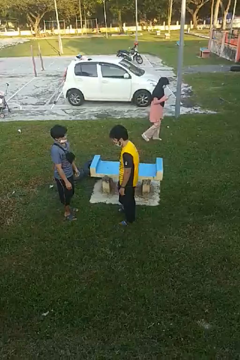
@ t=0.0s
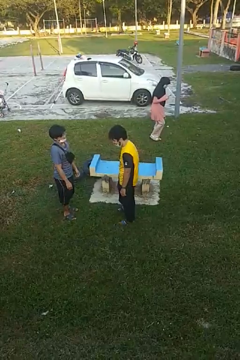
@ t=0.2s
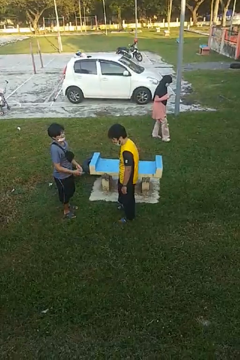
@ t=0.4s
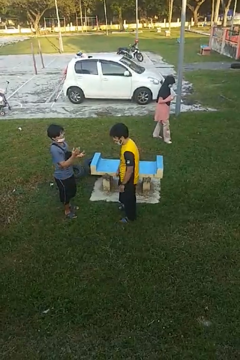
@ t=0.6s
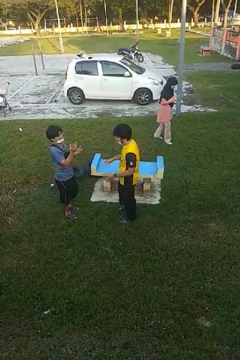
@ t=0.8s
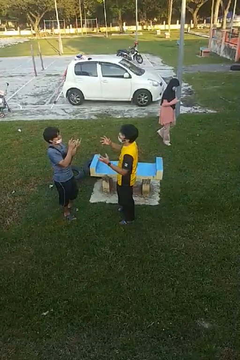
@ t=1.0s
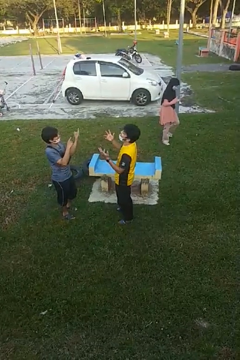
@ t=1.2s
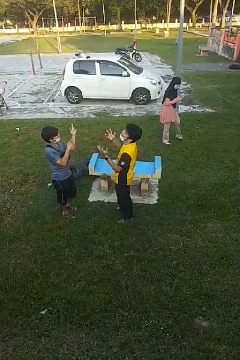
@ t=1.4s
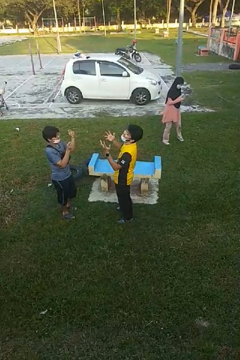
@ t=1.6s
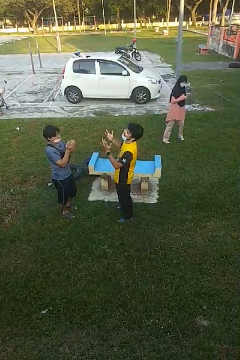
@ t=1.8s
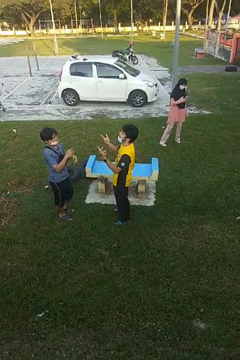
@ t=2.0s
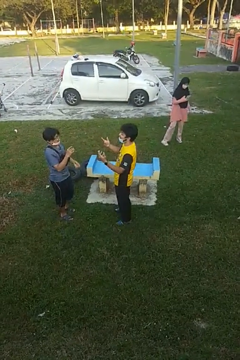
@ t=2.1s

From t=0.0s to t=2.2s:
person talks to person

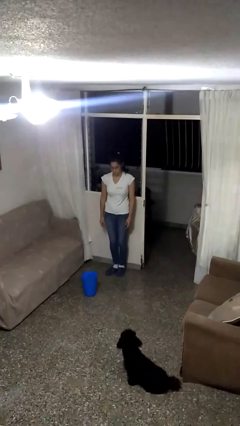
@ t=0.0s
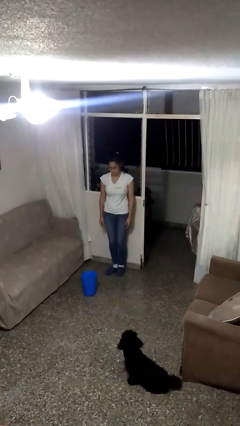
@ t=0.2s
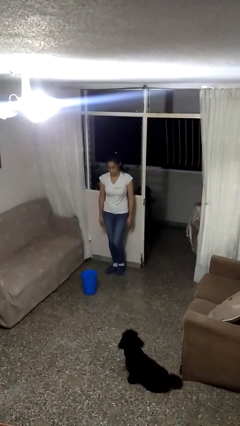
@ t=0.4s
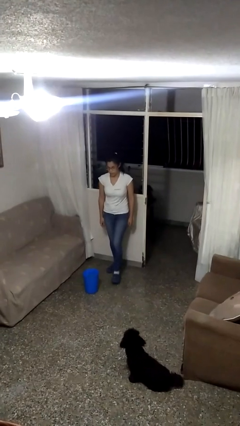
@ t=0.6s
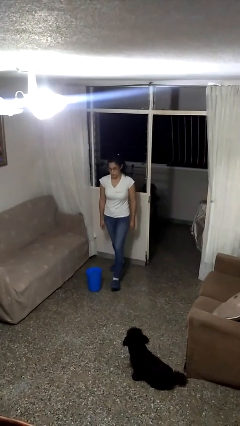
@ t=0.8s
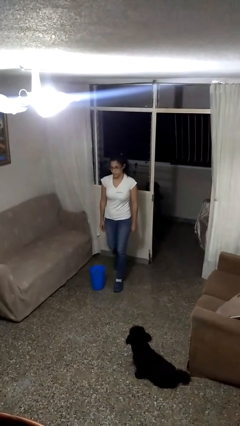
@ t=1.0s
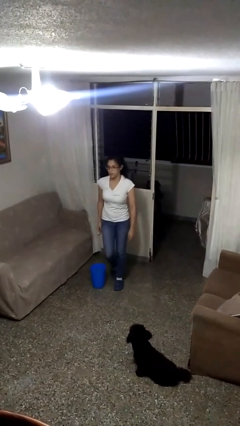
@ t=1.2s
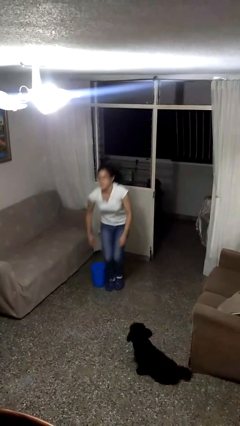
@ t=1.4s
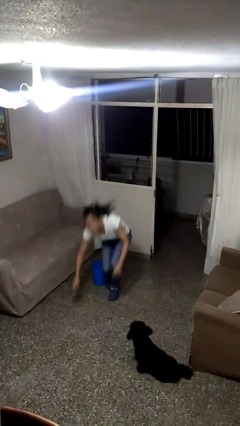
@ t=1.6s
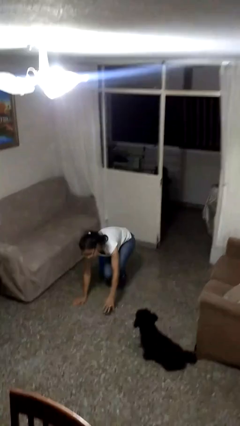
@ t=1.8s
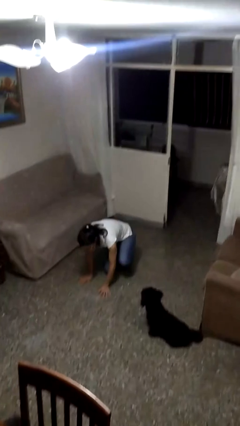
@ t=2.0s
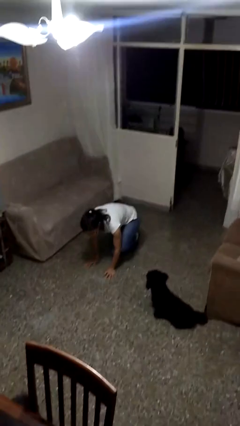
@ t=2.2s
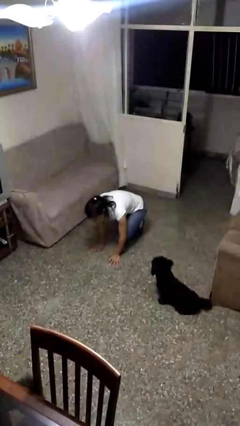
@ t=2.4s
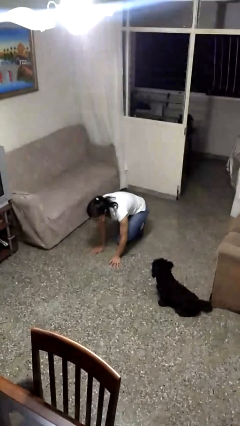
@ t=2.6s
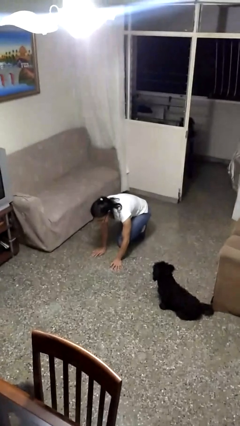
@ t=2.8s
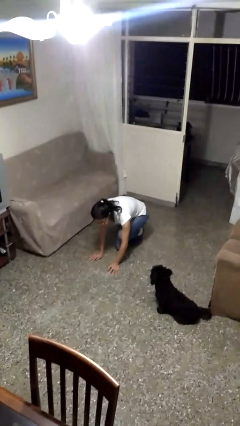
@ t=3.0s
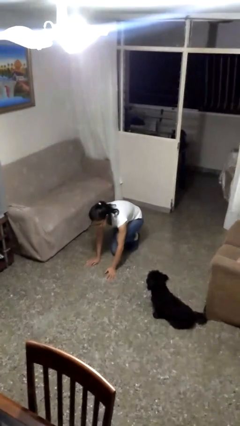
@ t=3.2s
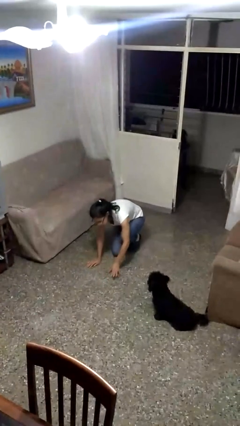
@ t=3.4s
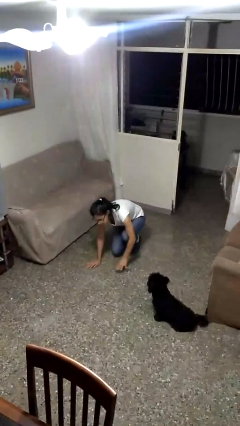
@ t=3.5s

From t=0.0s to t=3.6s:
person trips on object on floor

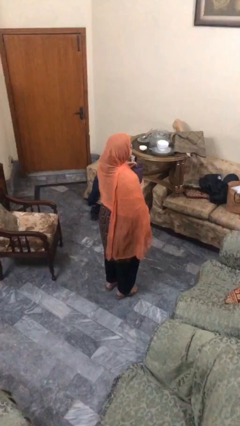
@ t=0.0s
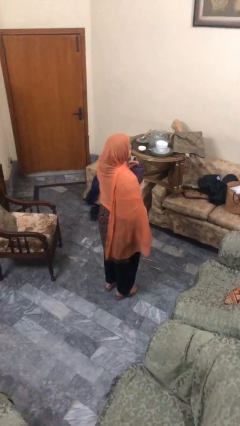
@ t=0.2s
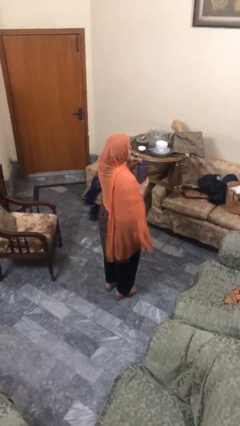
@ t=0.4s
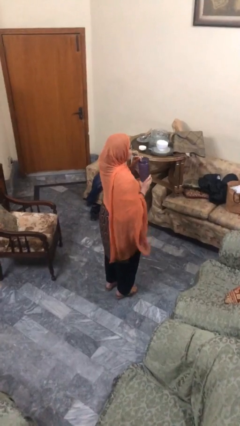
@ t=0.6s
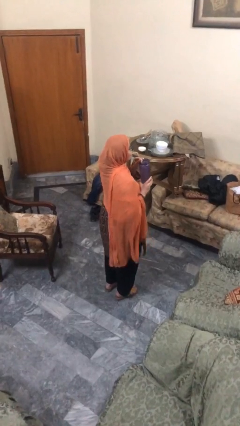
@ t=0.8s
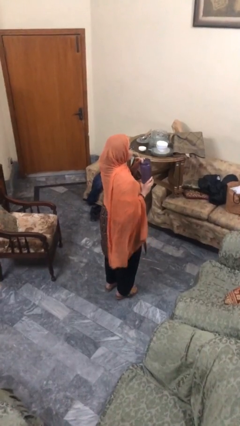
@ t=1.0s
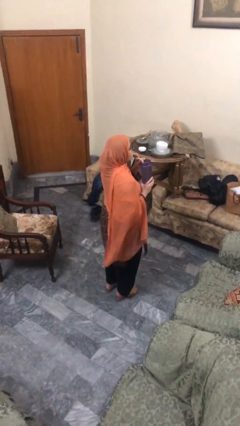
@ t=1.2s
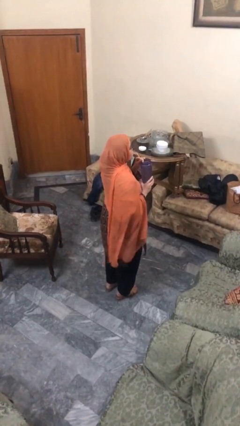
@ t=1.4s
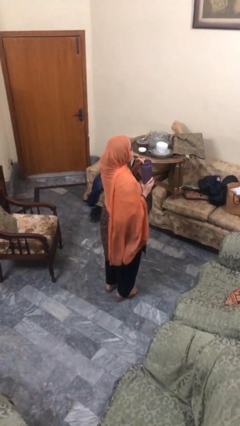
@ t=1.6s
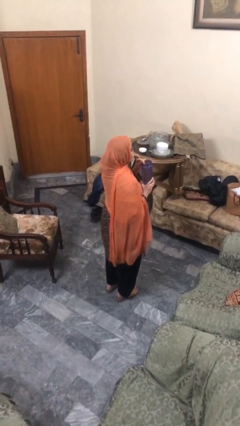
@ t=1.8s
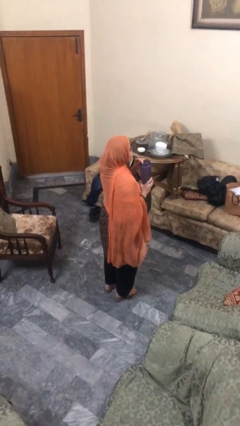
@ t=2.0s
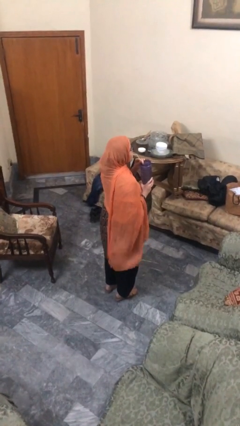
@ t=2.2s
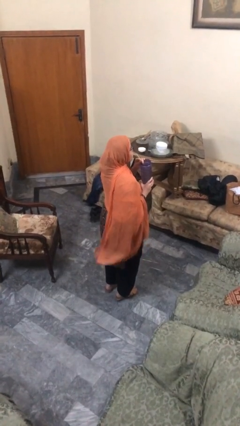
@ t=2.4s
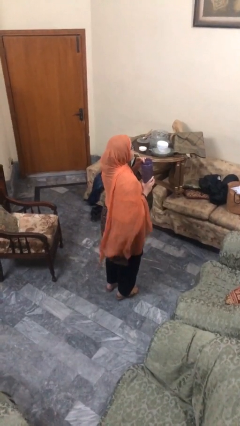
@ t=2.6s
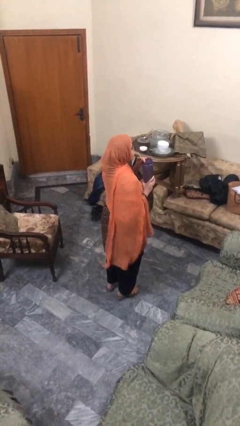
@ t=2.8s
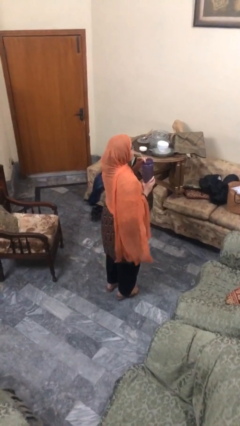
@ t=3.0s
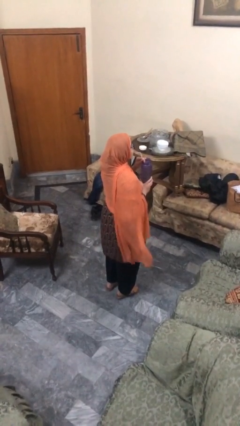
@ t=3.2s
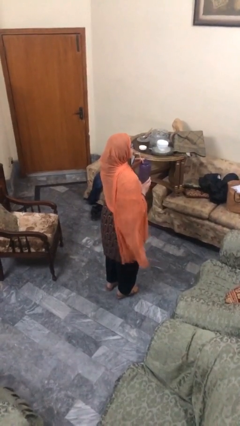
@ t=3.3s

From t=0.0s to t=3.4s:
person drinks from straw

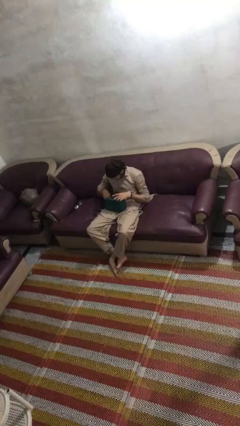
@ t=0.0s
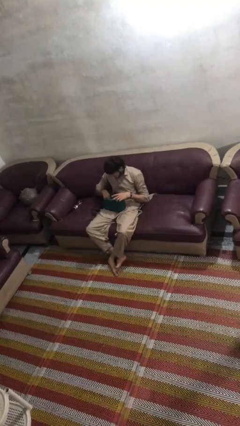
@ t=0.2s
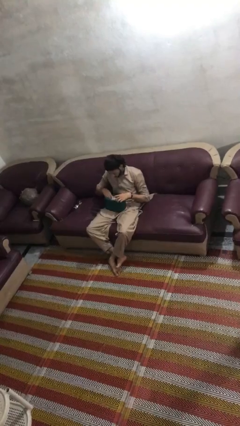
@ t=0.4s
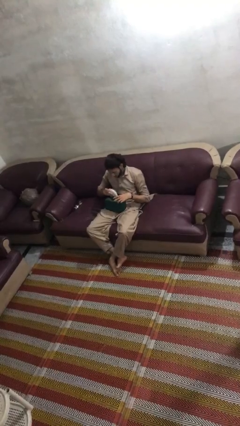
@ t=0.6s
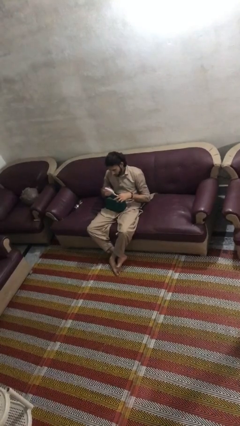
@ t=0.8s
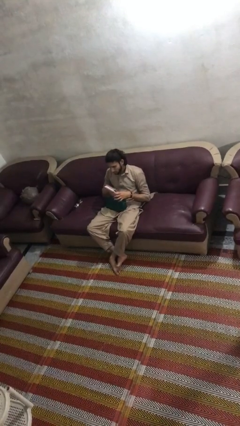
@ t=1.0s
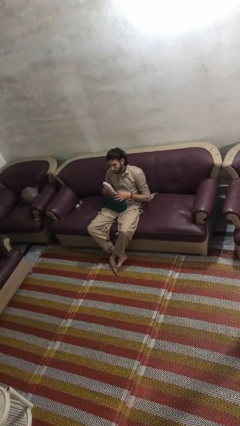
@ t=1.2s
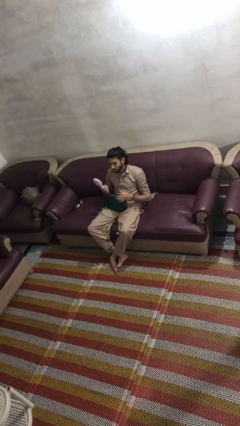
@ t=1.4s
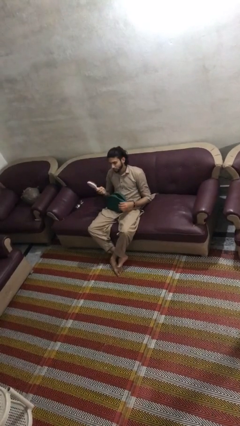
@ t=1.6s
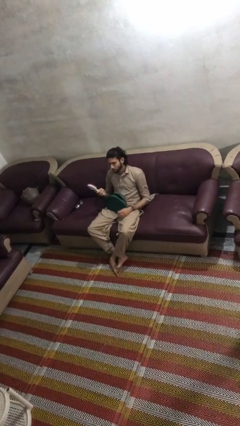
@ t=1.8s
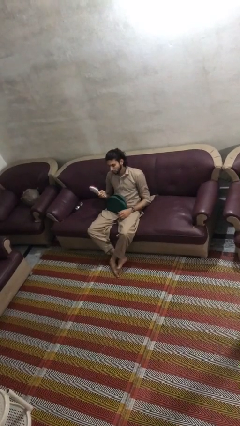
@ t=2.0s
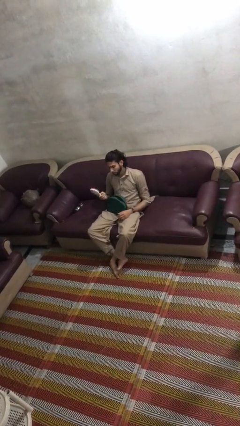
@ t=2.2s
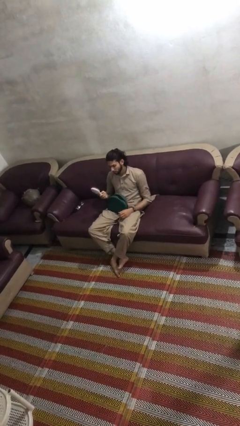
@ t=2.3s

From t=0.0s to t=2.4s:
person takes object from purse

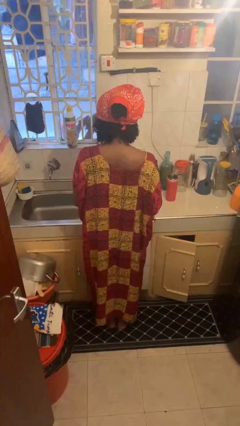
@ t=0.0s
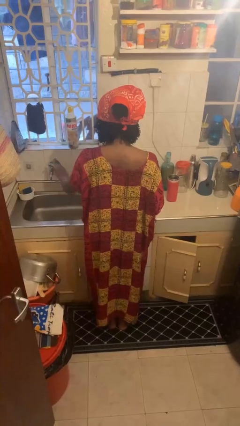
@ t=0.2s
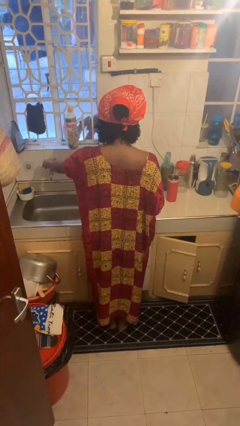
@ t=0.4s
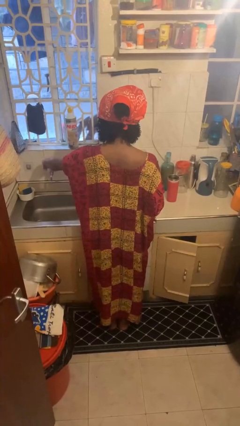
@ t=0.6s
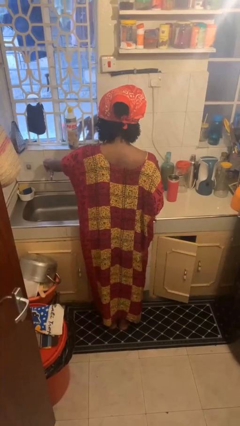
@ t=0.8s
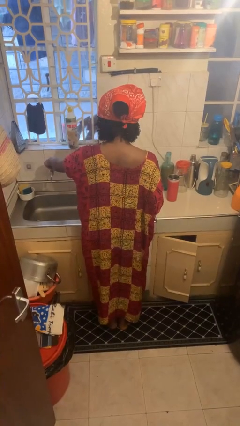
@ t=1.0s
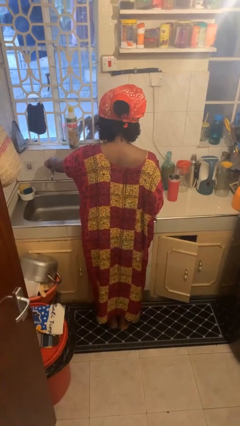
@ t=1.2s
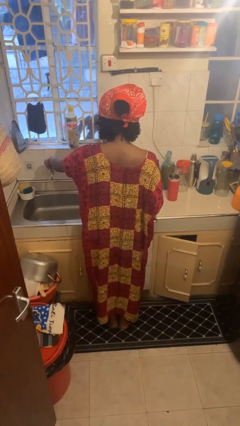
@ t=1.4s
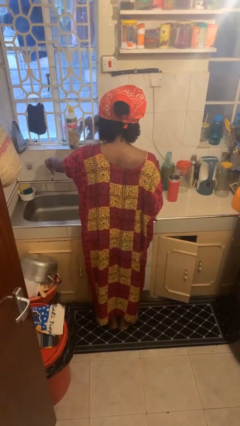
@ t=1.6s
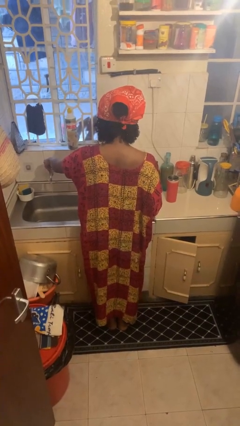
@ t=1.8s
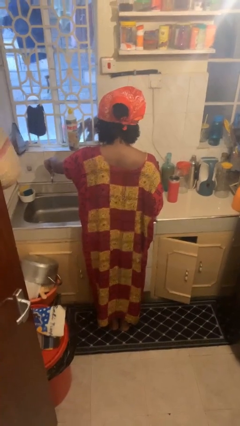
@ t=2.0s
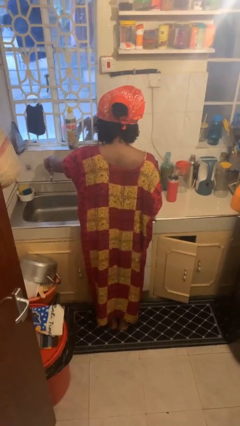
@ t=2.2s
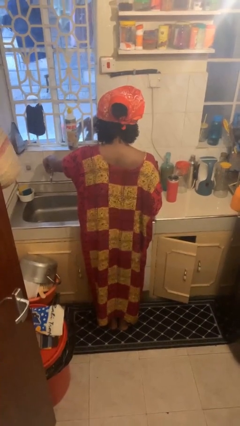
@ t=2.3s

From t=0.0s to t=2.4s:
person turns on faucet

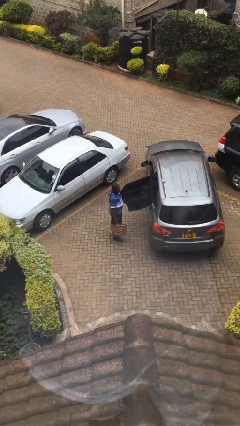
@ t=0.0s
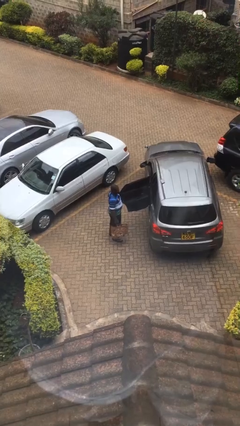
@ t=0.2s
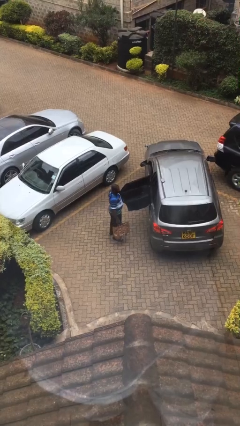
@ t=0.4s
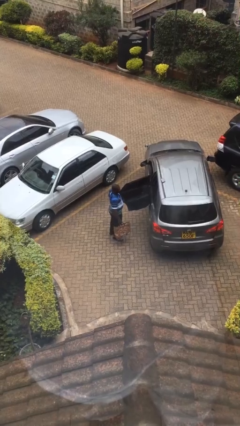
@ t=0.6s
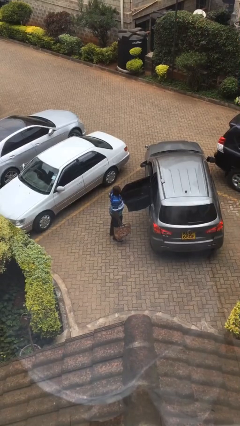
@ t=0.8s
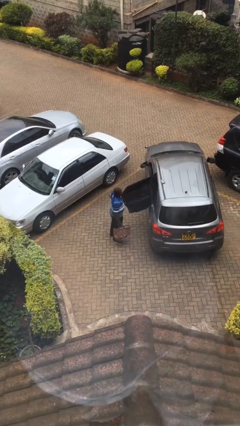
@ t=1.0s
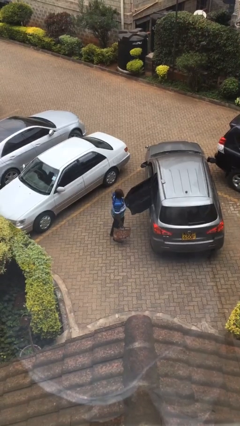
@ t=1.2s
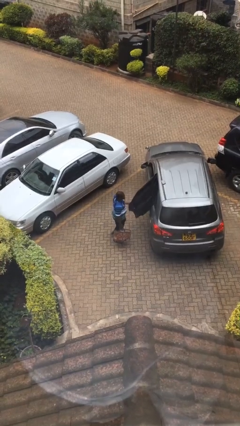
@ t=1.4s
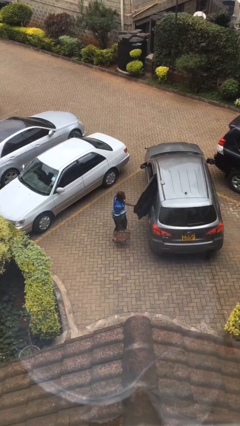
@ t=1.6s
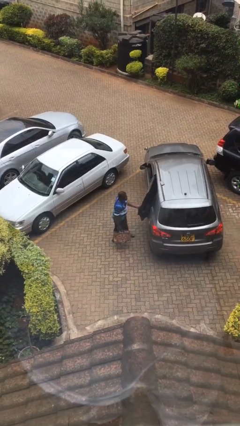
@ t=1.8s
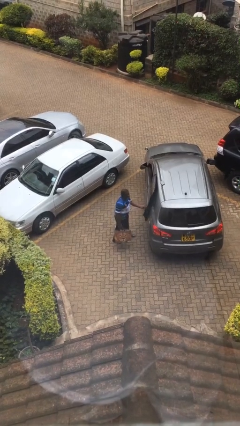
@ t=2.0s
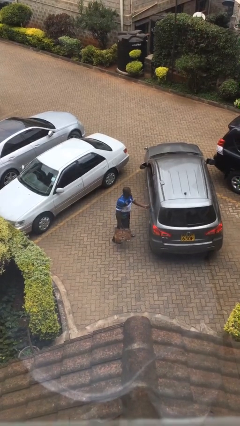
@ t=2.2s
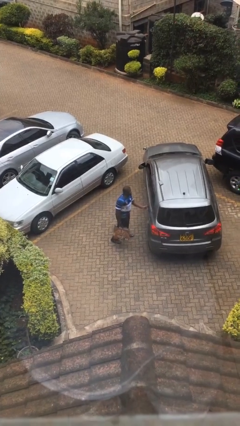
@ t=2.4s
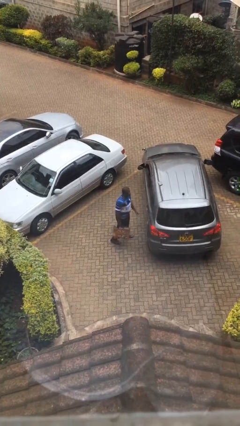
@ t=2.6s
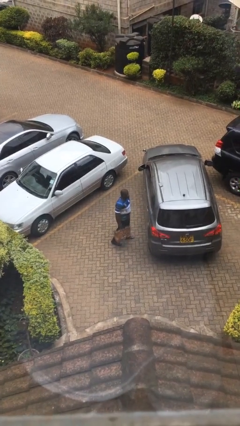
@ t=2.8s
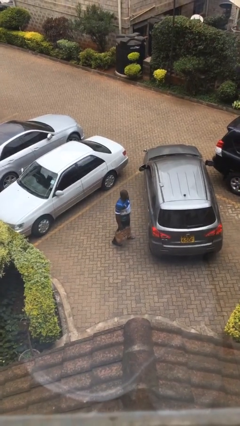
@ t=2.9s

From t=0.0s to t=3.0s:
person closes car door

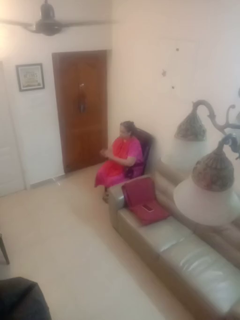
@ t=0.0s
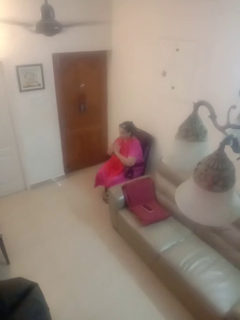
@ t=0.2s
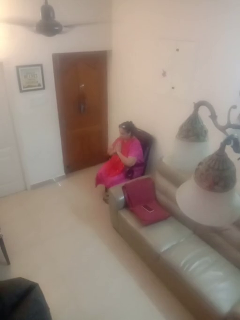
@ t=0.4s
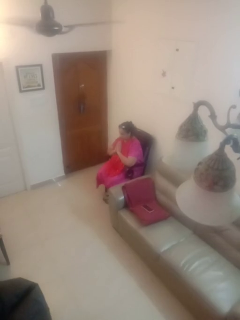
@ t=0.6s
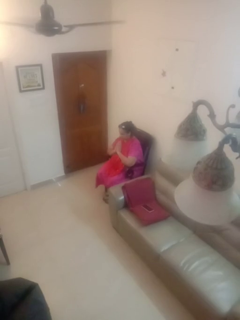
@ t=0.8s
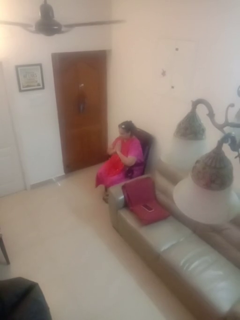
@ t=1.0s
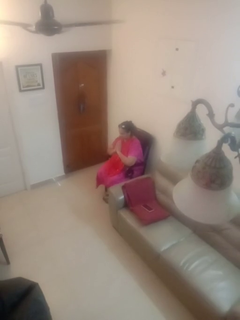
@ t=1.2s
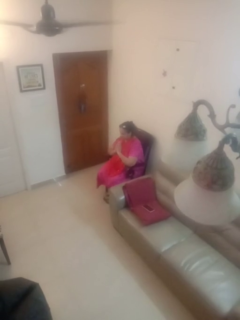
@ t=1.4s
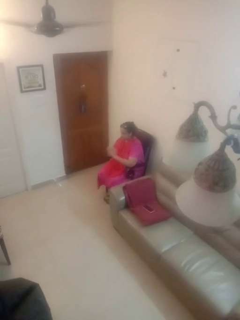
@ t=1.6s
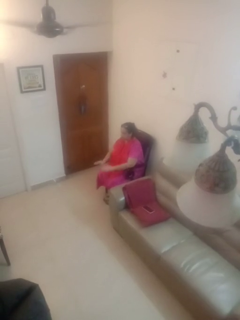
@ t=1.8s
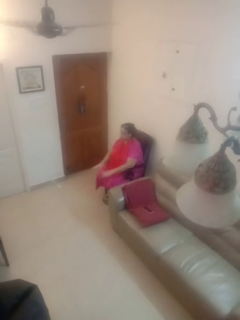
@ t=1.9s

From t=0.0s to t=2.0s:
person prays
